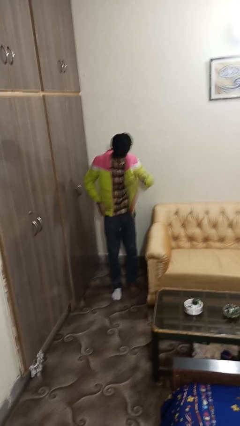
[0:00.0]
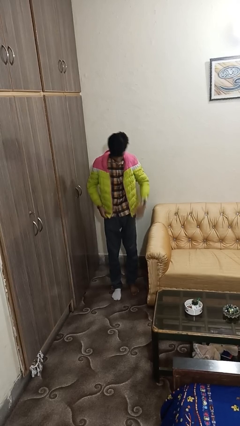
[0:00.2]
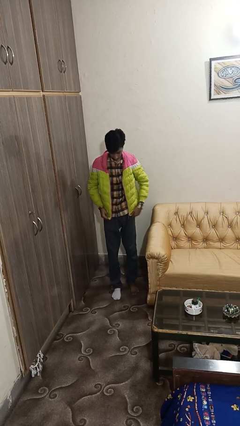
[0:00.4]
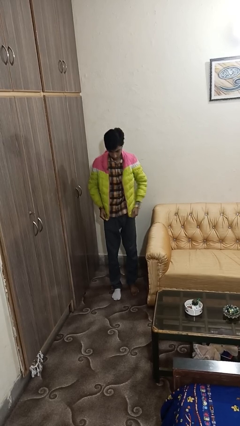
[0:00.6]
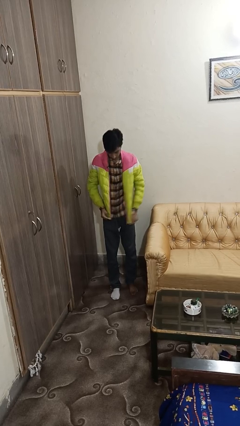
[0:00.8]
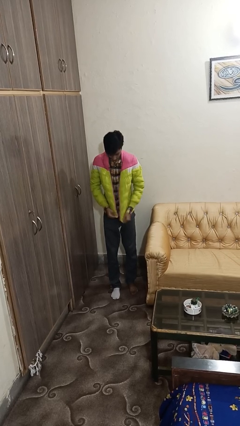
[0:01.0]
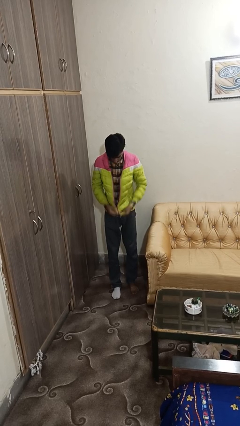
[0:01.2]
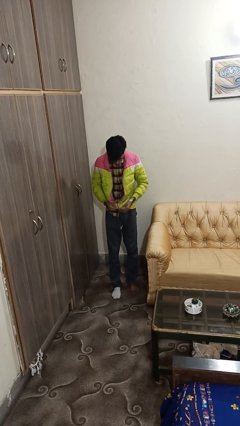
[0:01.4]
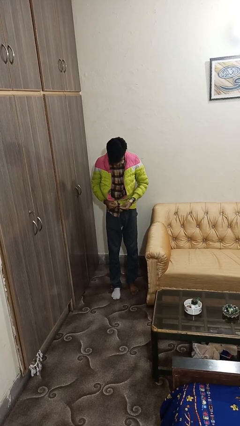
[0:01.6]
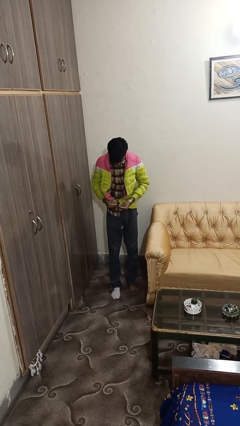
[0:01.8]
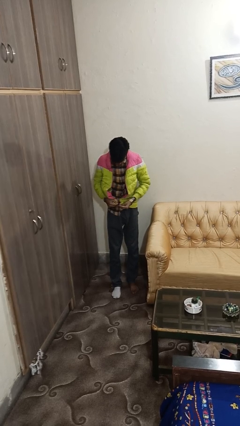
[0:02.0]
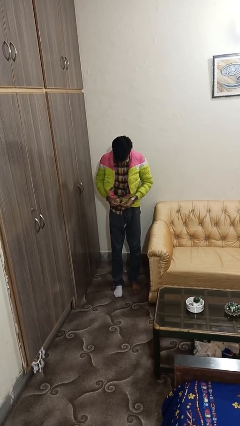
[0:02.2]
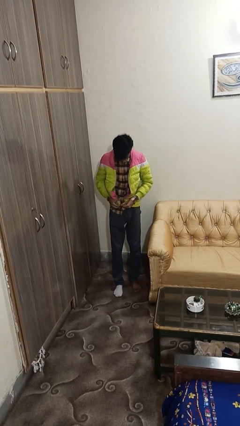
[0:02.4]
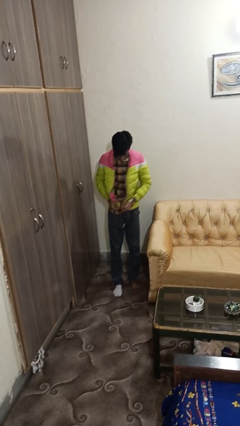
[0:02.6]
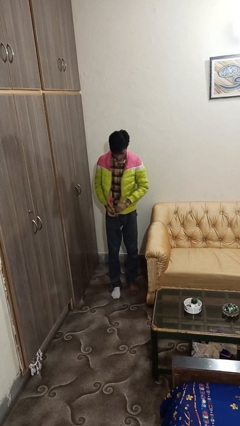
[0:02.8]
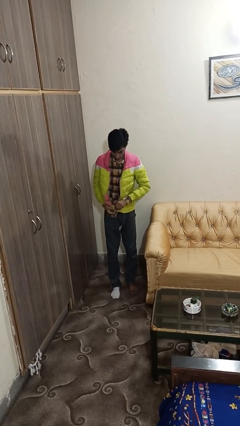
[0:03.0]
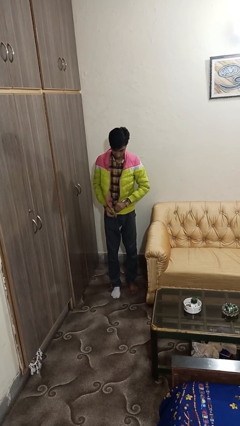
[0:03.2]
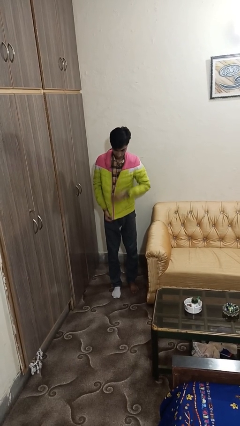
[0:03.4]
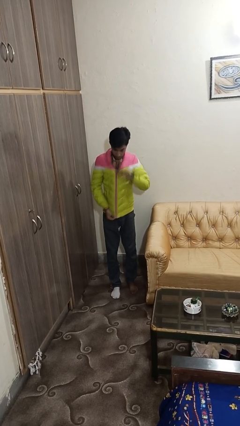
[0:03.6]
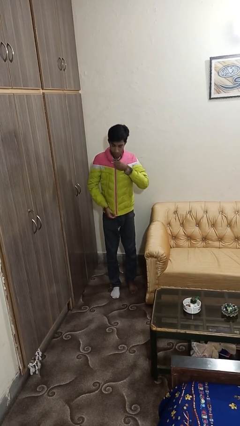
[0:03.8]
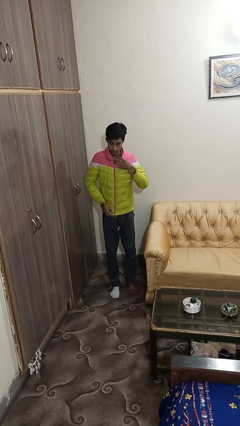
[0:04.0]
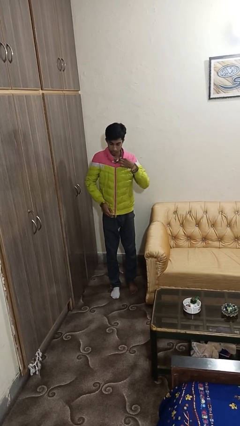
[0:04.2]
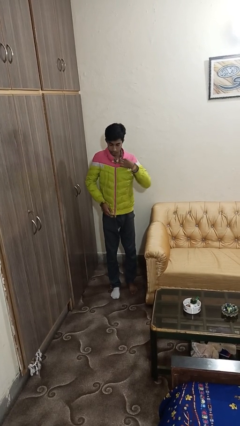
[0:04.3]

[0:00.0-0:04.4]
person zips up jacket

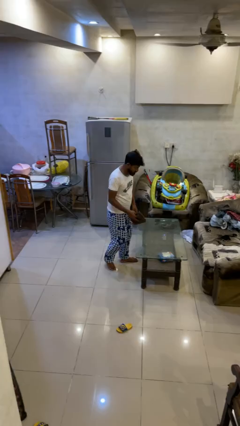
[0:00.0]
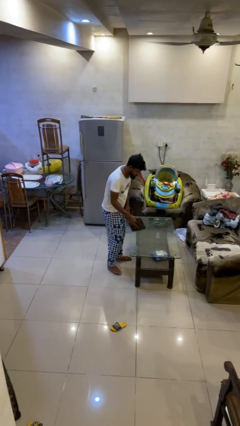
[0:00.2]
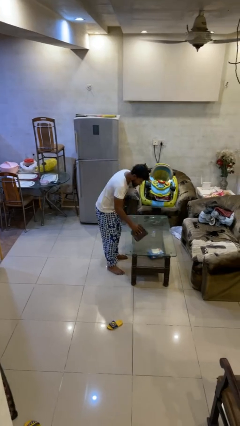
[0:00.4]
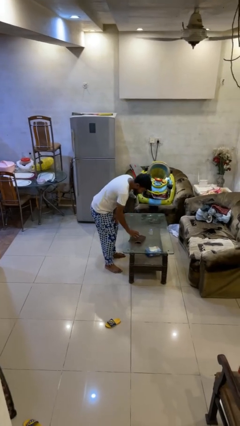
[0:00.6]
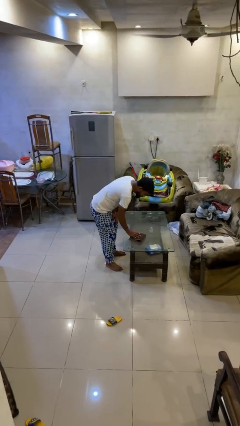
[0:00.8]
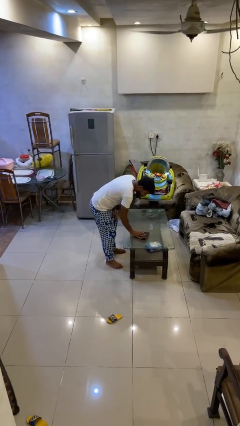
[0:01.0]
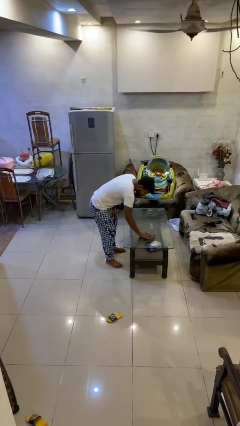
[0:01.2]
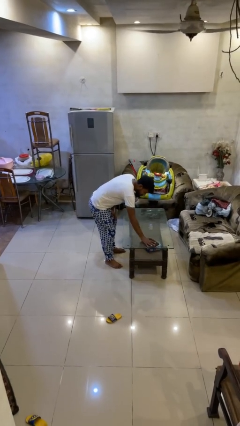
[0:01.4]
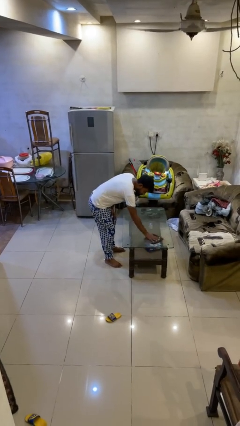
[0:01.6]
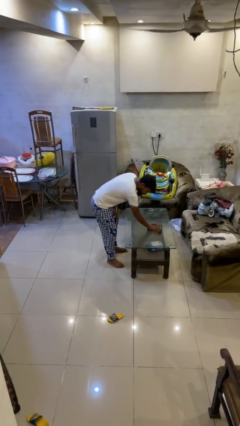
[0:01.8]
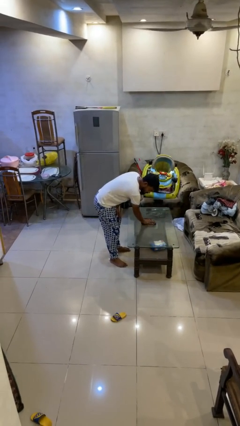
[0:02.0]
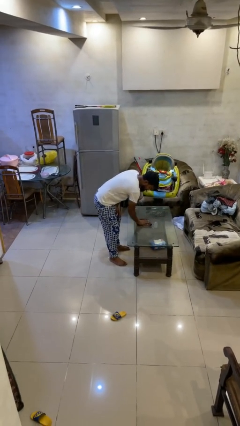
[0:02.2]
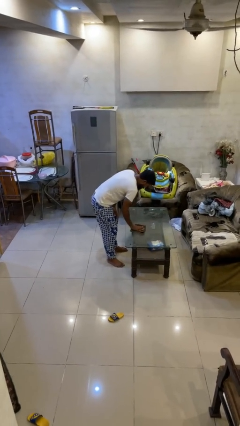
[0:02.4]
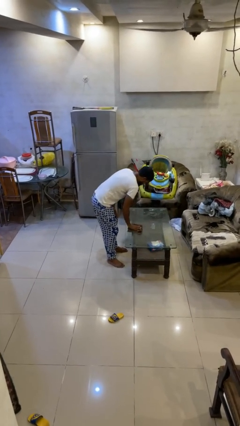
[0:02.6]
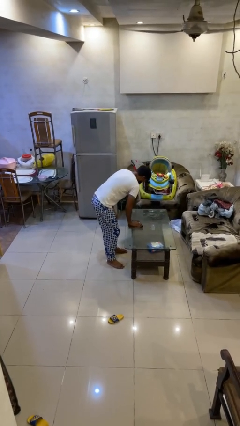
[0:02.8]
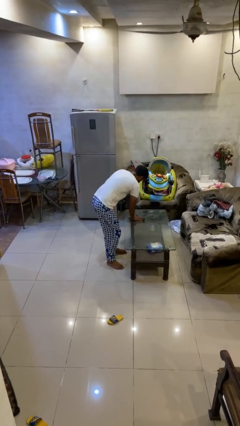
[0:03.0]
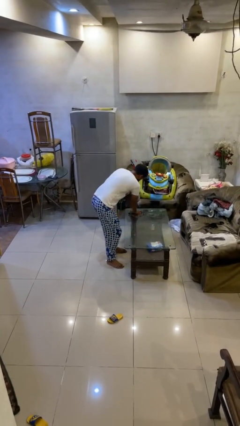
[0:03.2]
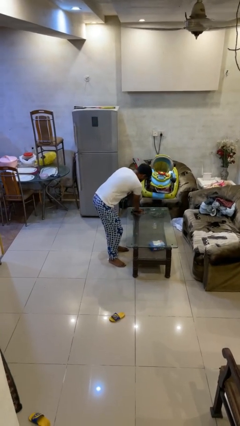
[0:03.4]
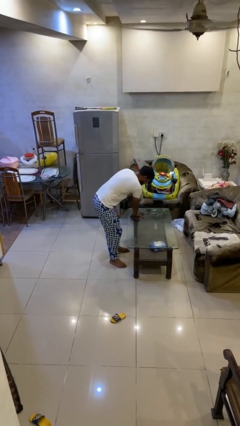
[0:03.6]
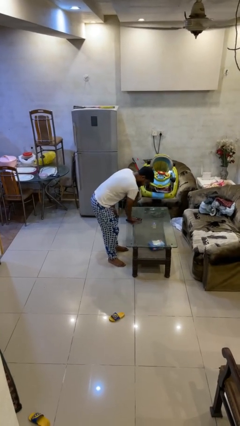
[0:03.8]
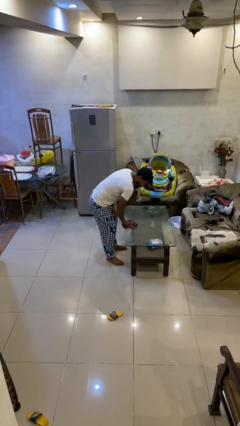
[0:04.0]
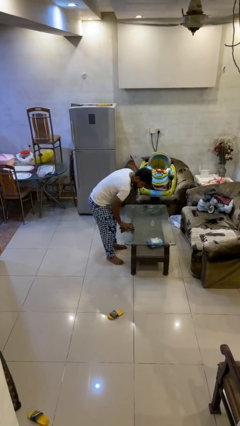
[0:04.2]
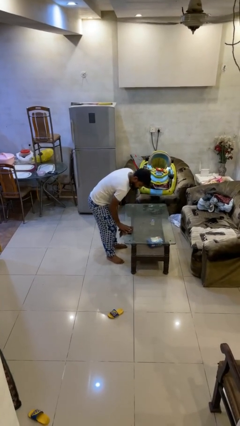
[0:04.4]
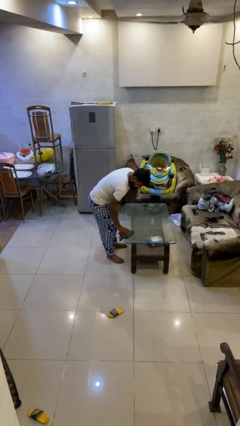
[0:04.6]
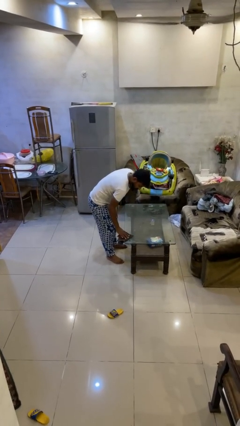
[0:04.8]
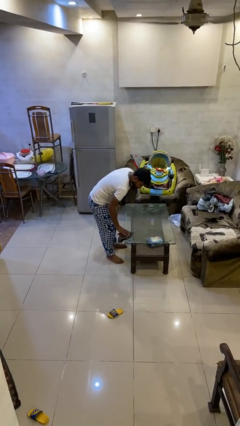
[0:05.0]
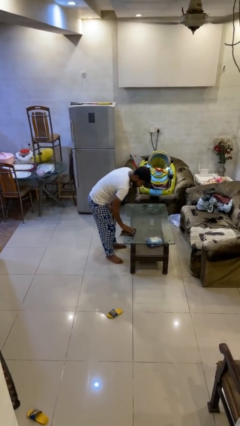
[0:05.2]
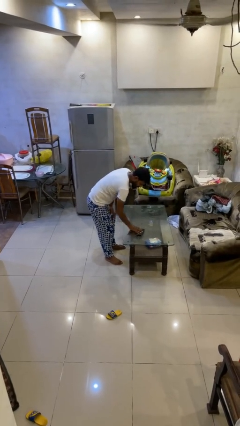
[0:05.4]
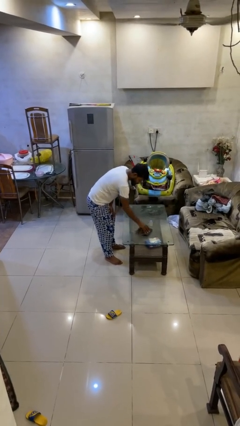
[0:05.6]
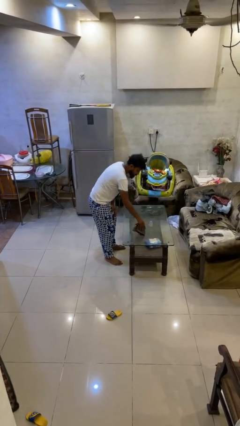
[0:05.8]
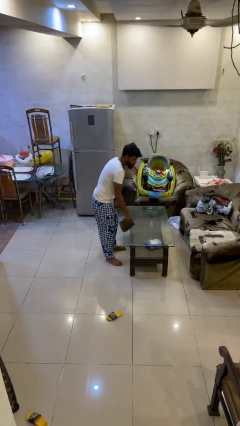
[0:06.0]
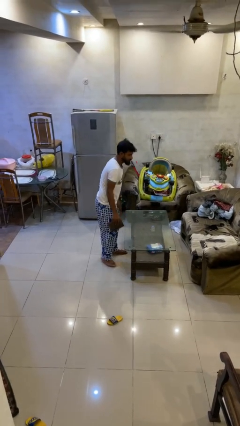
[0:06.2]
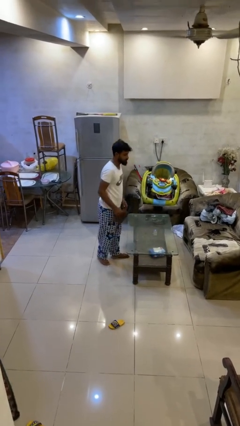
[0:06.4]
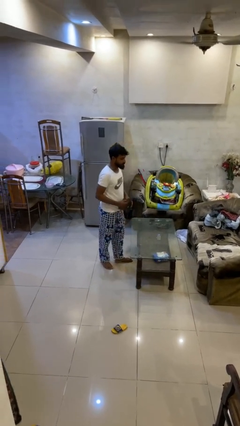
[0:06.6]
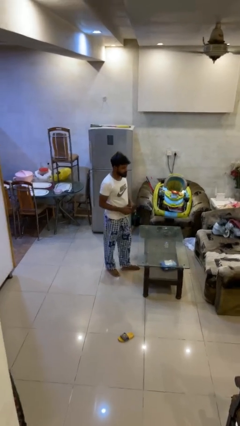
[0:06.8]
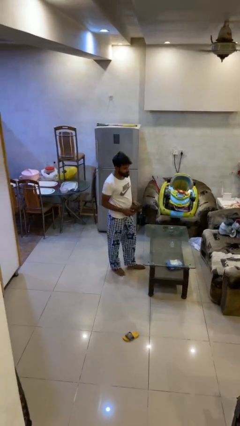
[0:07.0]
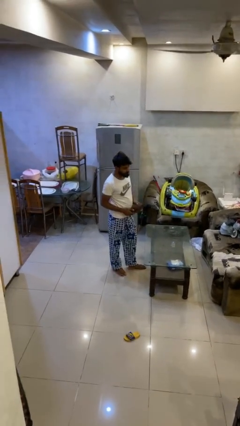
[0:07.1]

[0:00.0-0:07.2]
person cleans table with rag

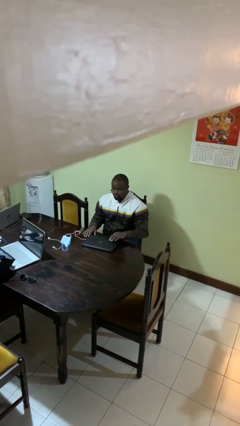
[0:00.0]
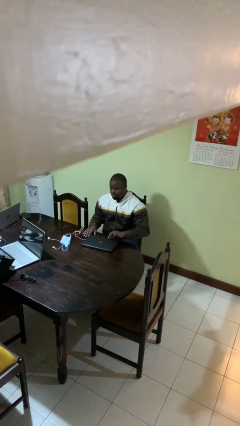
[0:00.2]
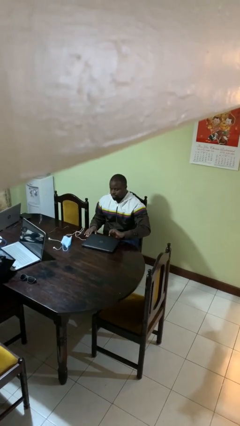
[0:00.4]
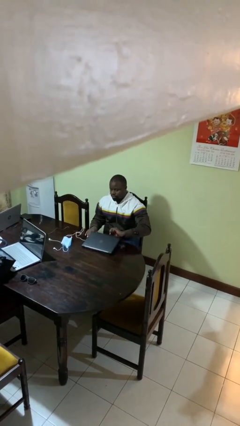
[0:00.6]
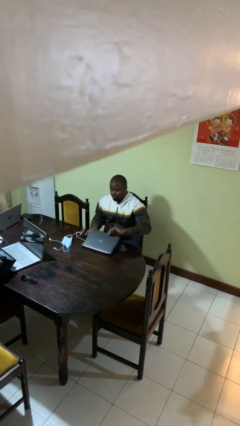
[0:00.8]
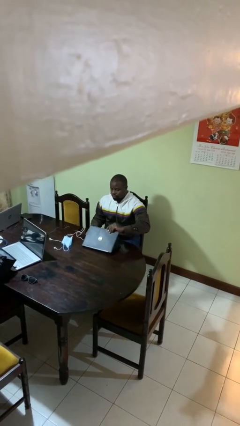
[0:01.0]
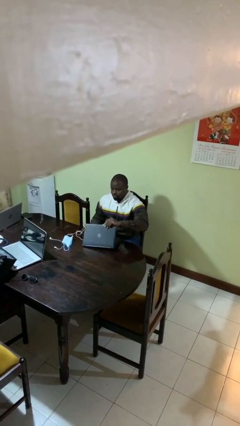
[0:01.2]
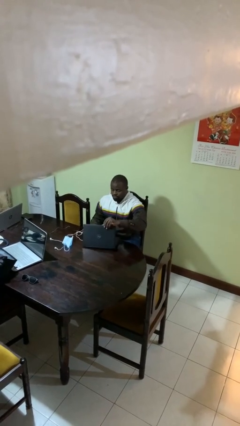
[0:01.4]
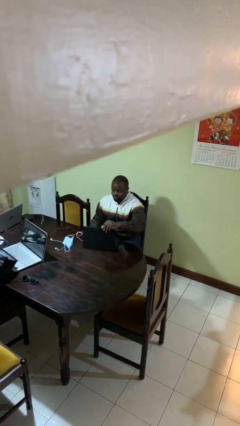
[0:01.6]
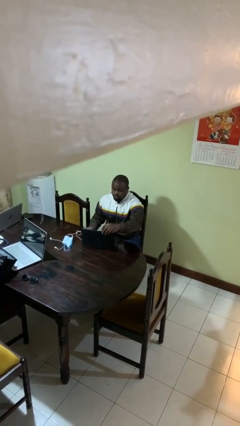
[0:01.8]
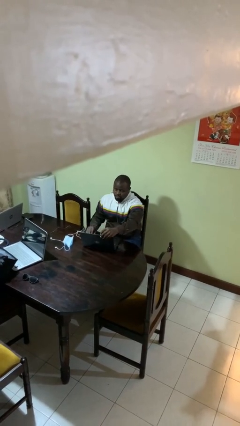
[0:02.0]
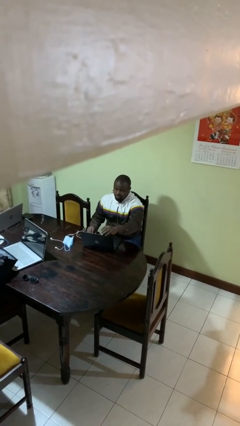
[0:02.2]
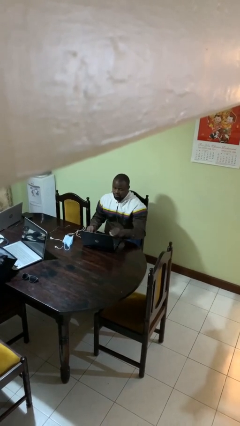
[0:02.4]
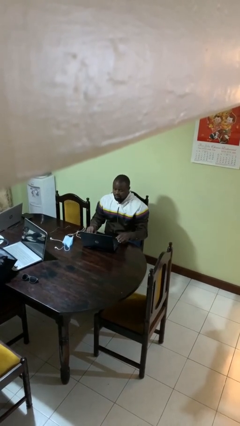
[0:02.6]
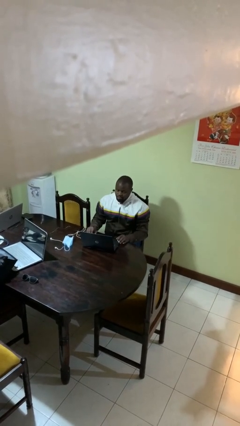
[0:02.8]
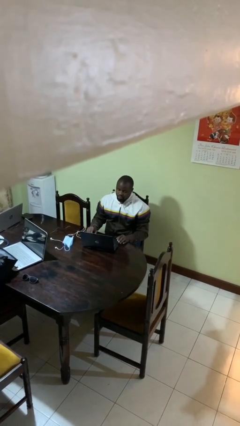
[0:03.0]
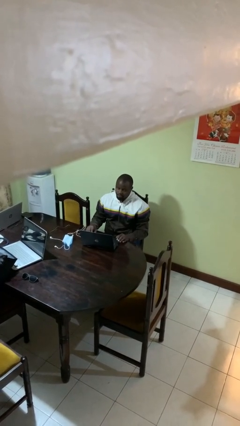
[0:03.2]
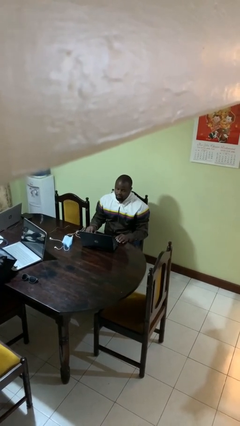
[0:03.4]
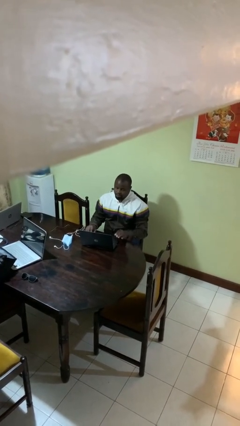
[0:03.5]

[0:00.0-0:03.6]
person opens laptop

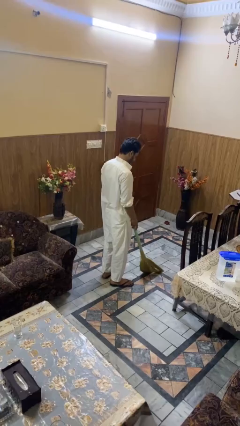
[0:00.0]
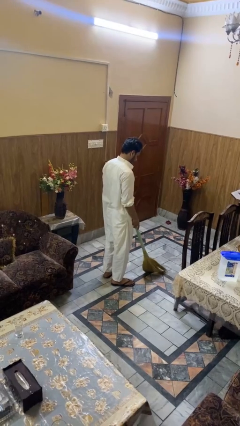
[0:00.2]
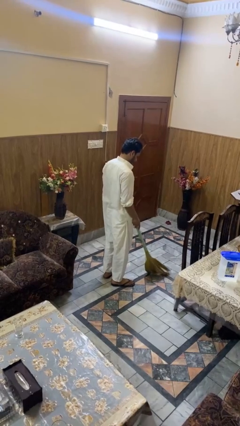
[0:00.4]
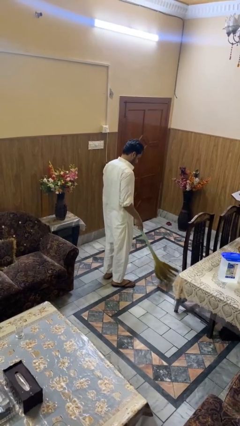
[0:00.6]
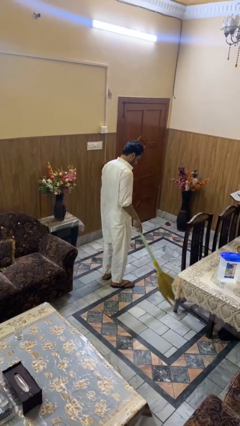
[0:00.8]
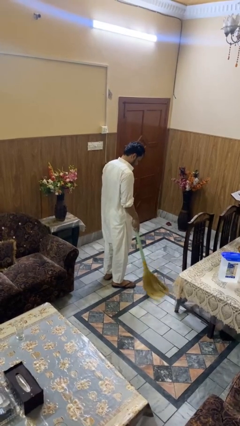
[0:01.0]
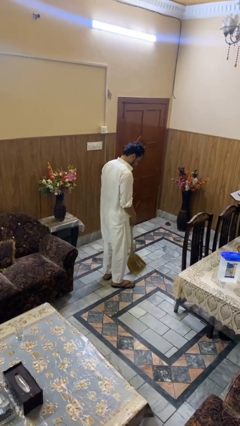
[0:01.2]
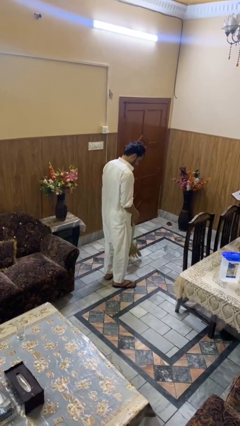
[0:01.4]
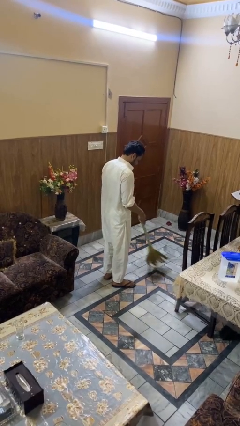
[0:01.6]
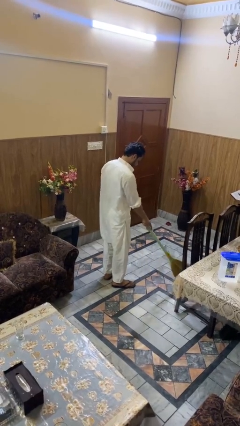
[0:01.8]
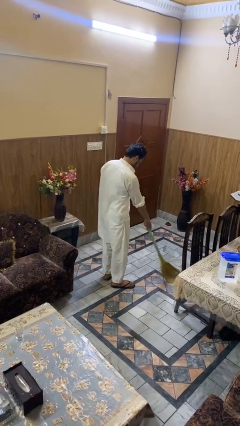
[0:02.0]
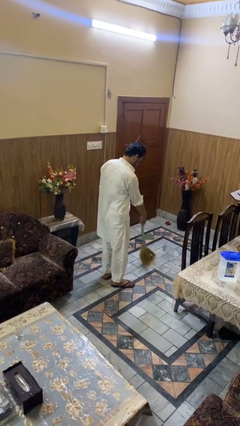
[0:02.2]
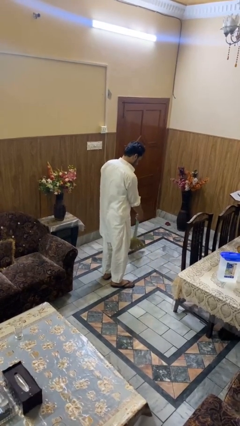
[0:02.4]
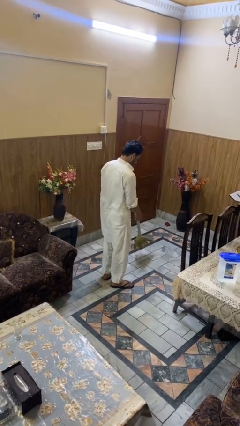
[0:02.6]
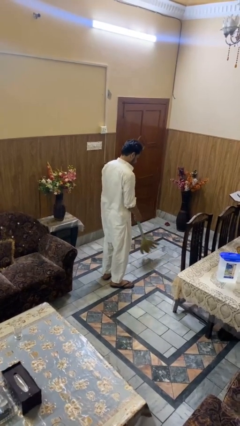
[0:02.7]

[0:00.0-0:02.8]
person sweeps floor
